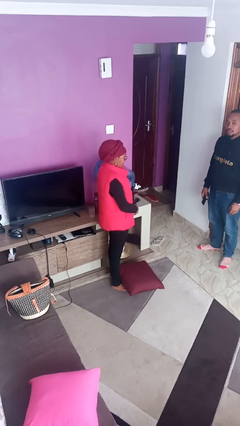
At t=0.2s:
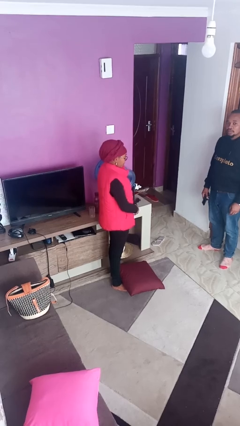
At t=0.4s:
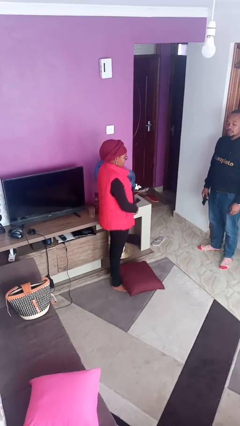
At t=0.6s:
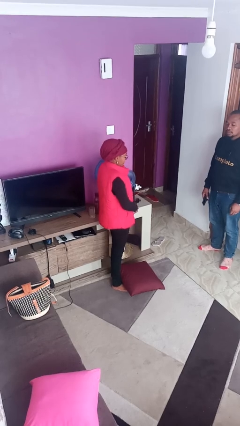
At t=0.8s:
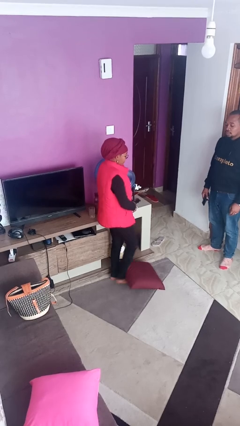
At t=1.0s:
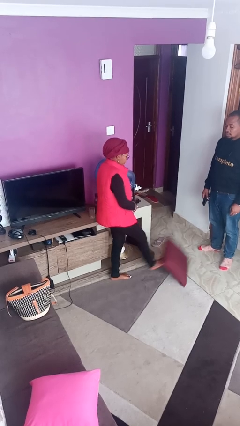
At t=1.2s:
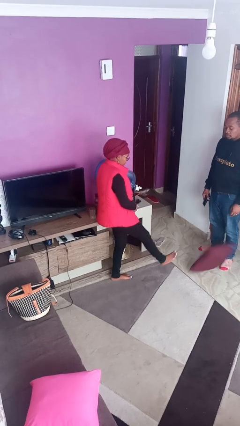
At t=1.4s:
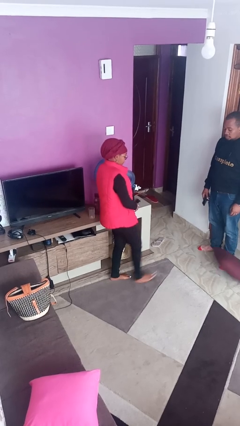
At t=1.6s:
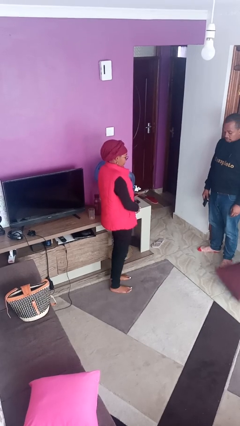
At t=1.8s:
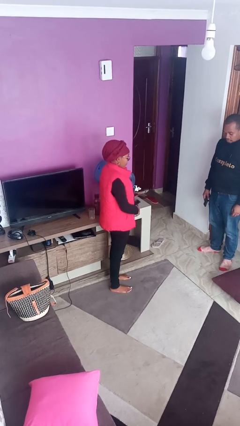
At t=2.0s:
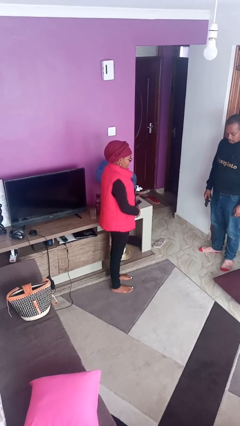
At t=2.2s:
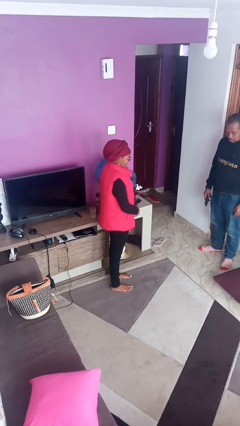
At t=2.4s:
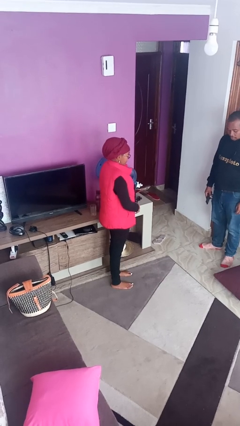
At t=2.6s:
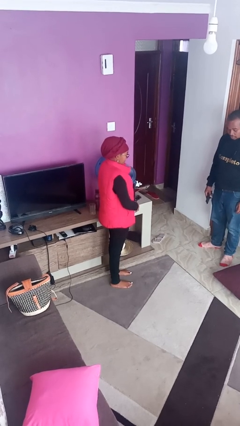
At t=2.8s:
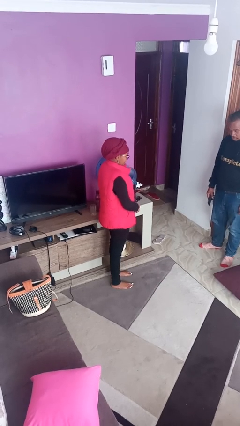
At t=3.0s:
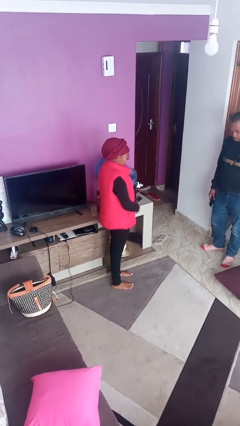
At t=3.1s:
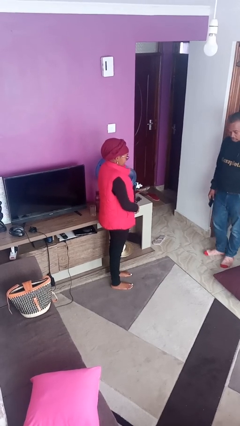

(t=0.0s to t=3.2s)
person kicks object to person

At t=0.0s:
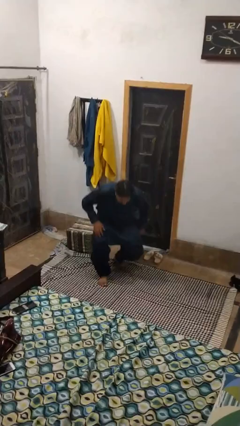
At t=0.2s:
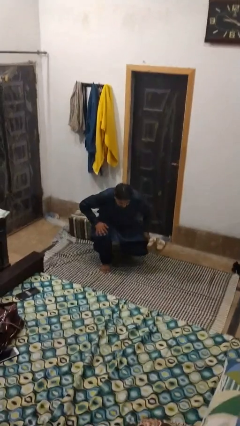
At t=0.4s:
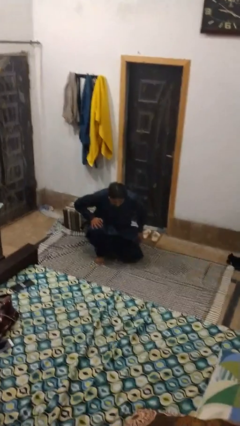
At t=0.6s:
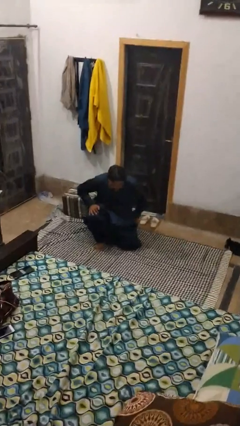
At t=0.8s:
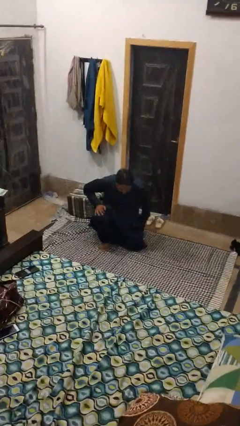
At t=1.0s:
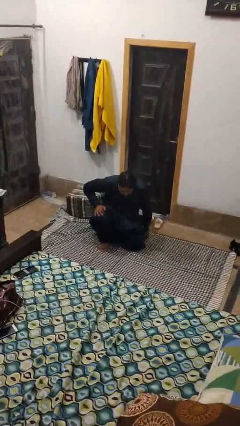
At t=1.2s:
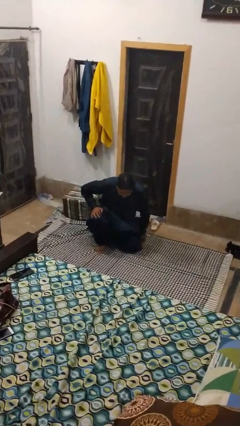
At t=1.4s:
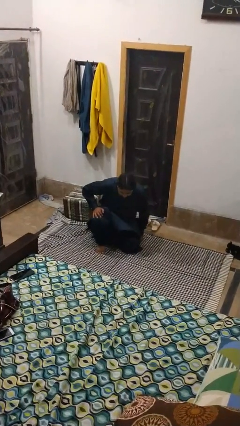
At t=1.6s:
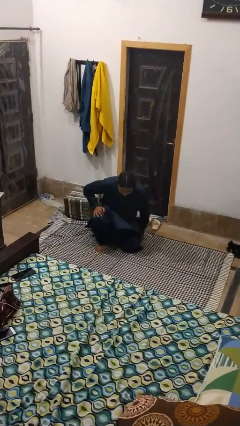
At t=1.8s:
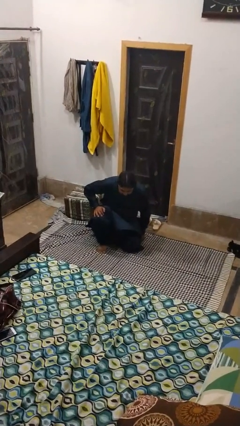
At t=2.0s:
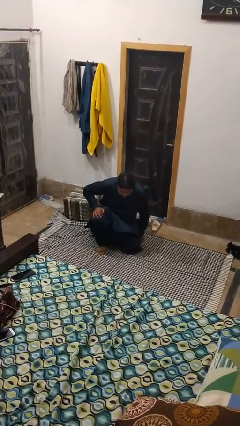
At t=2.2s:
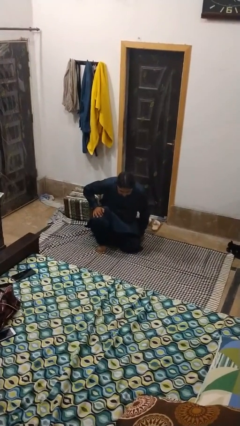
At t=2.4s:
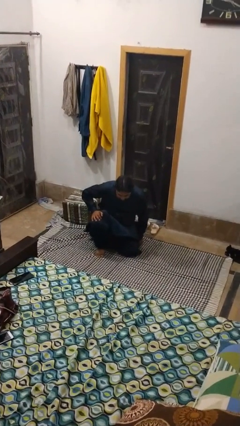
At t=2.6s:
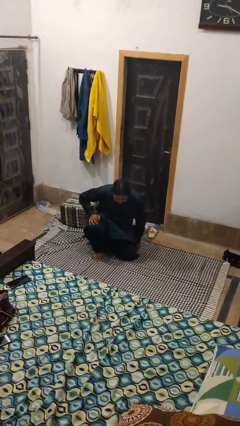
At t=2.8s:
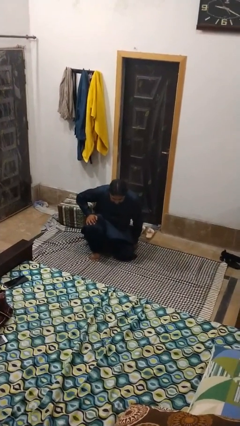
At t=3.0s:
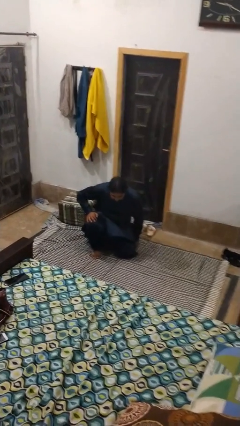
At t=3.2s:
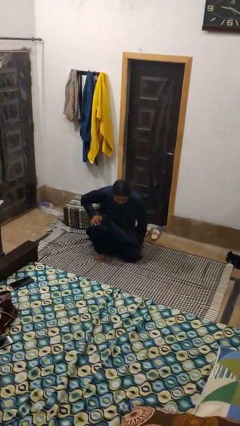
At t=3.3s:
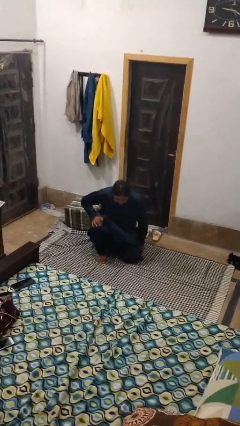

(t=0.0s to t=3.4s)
person kneels

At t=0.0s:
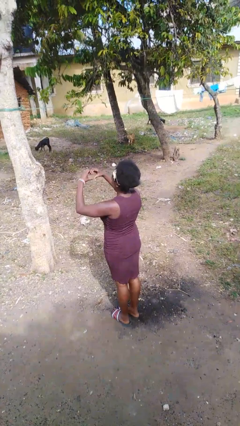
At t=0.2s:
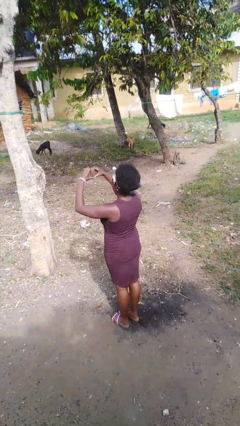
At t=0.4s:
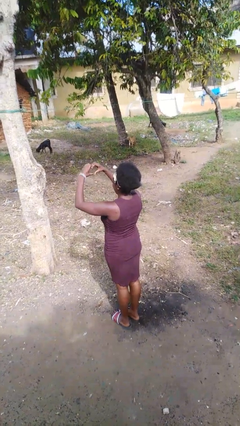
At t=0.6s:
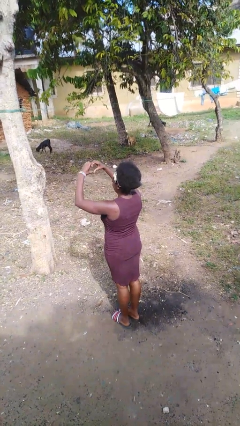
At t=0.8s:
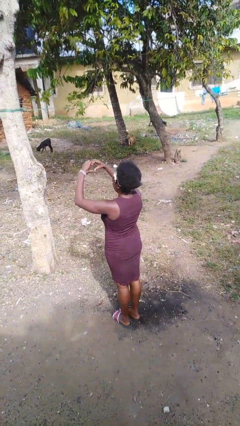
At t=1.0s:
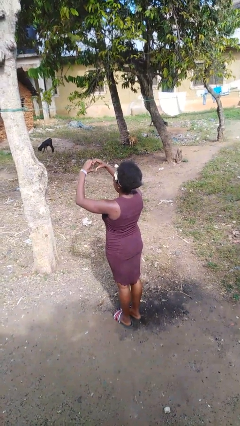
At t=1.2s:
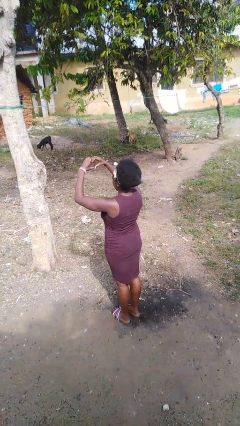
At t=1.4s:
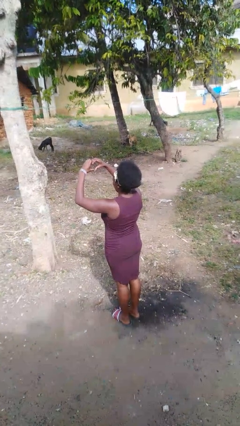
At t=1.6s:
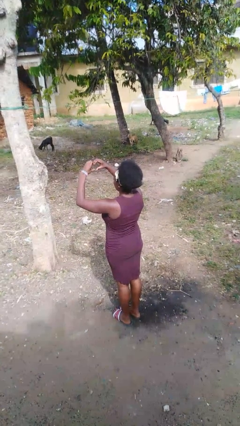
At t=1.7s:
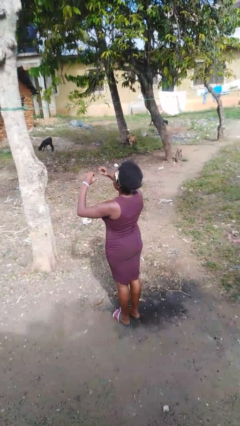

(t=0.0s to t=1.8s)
person gestures heart

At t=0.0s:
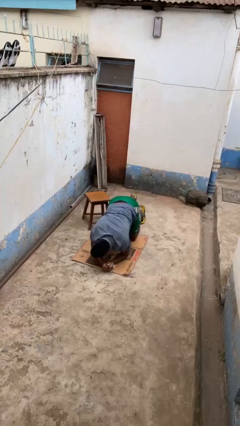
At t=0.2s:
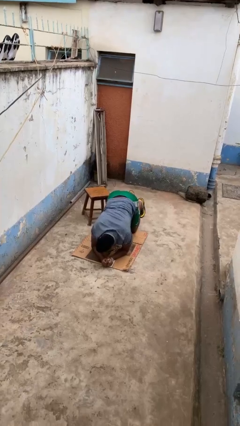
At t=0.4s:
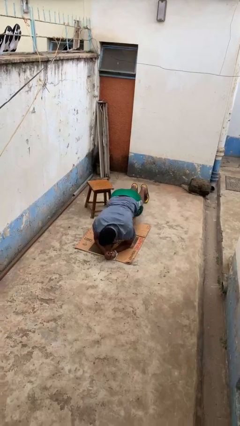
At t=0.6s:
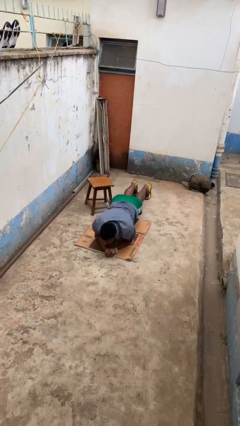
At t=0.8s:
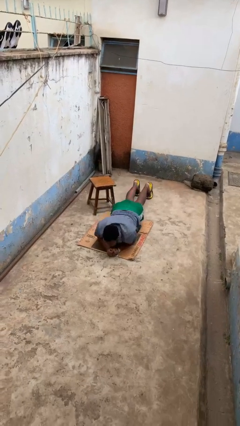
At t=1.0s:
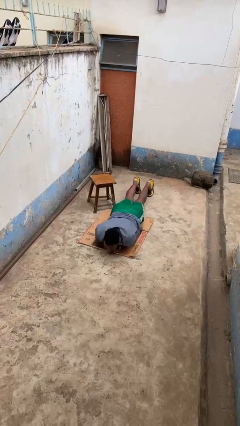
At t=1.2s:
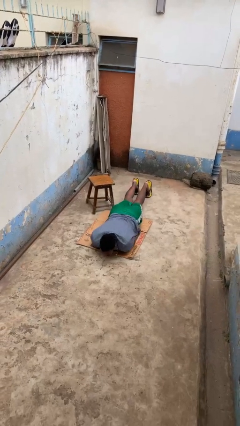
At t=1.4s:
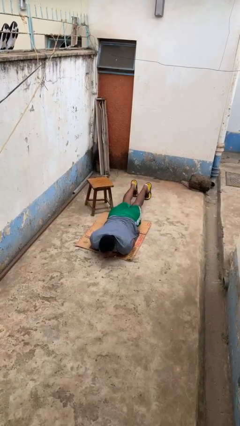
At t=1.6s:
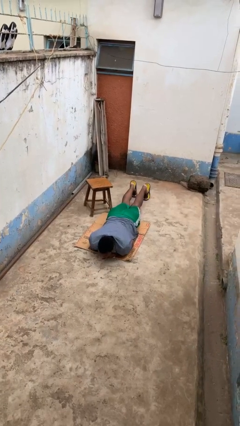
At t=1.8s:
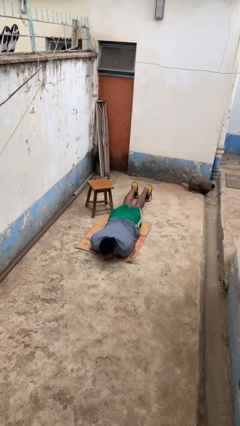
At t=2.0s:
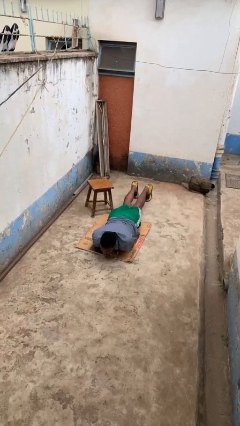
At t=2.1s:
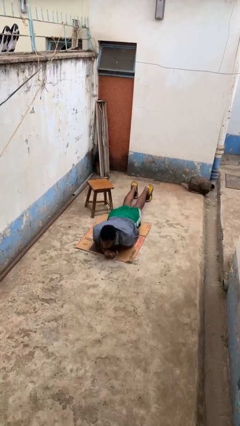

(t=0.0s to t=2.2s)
person lies down on floor

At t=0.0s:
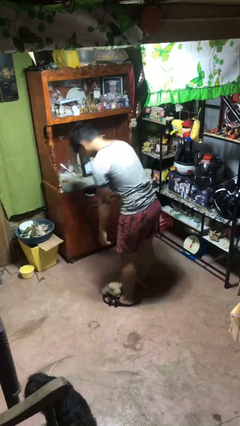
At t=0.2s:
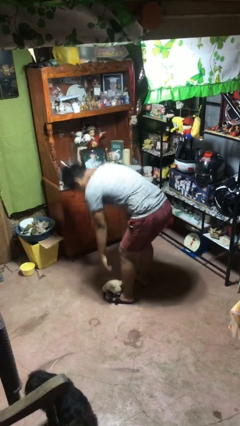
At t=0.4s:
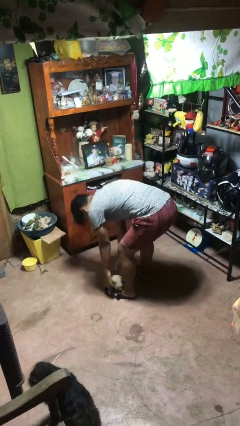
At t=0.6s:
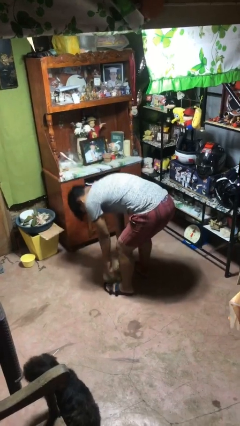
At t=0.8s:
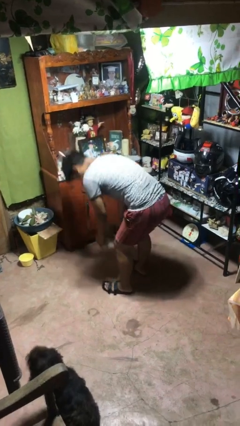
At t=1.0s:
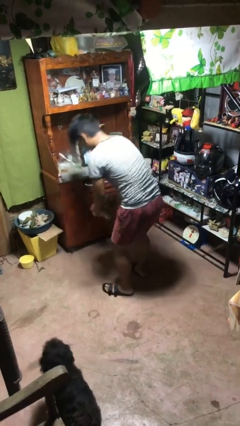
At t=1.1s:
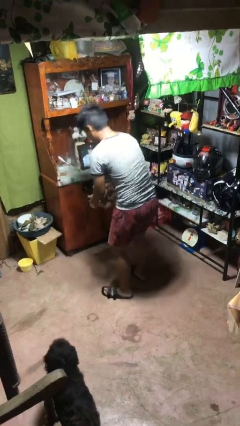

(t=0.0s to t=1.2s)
person picks up object from floor

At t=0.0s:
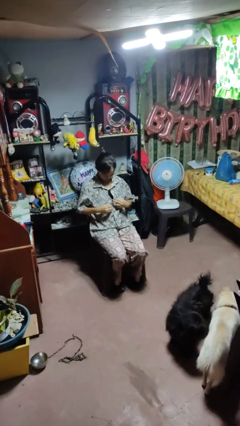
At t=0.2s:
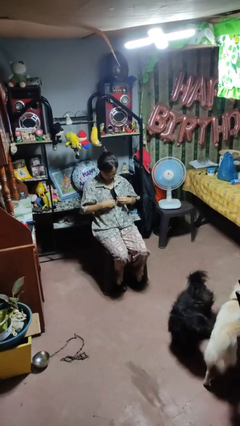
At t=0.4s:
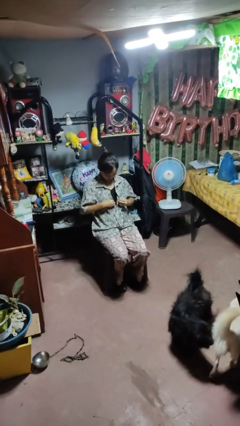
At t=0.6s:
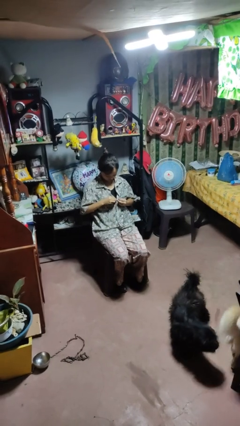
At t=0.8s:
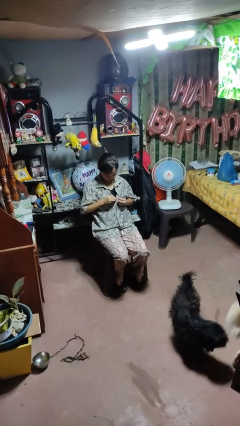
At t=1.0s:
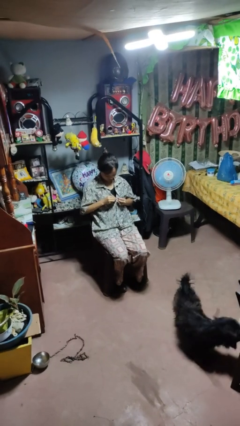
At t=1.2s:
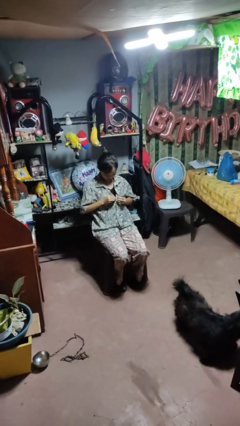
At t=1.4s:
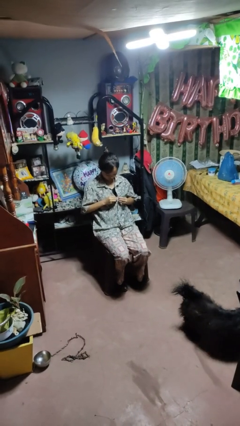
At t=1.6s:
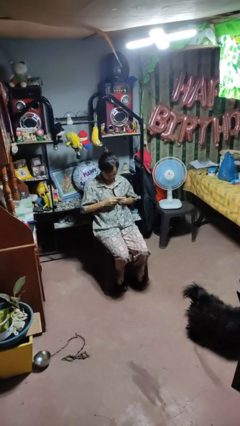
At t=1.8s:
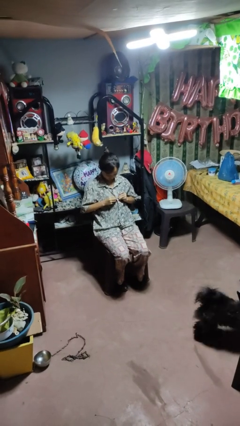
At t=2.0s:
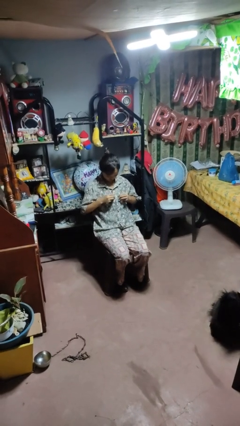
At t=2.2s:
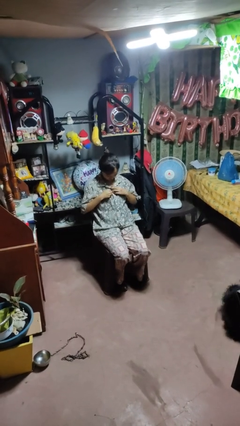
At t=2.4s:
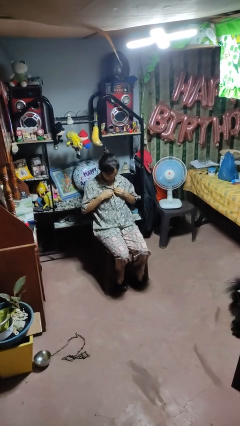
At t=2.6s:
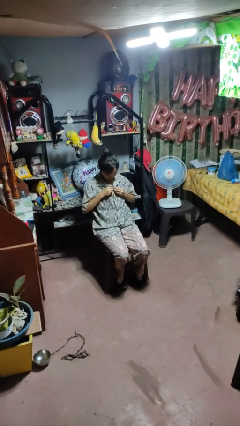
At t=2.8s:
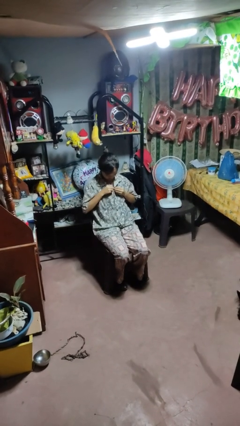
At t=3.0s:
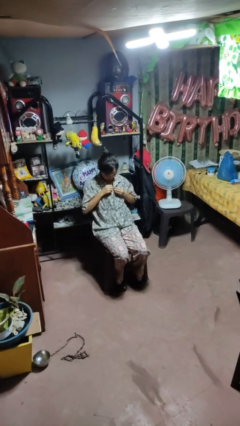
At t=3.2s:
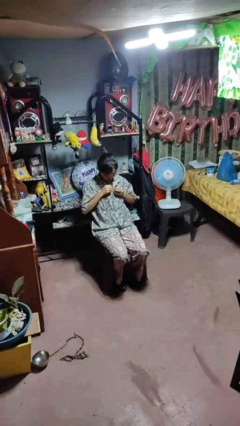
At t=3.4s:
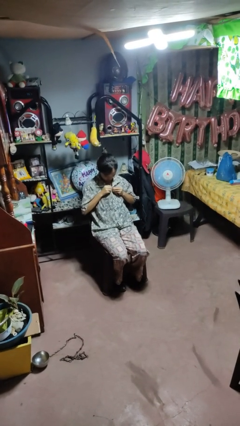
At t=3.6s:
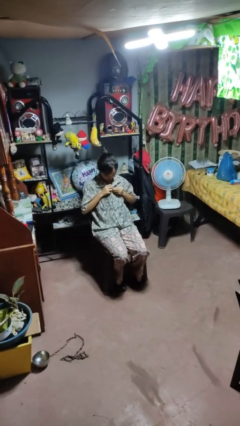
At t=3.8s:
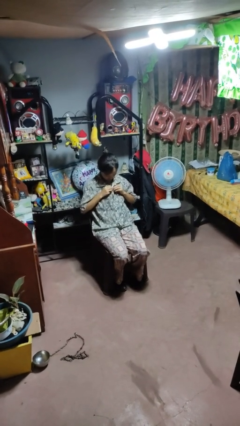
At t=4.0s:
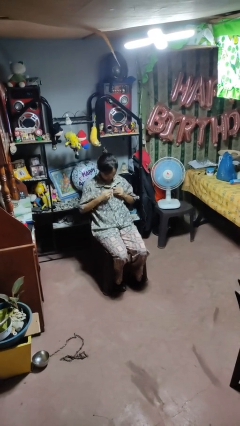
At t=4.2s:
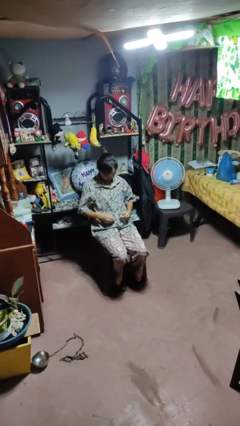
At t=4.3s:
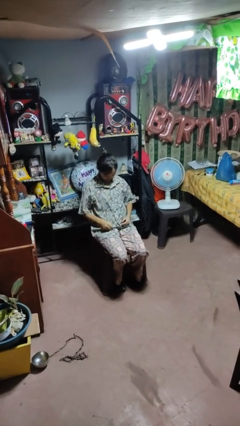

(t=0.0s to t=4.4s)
person buttons shirt

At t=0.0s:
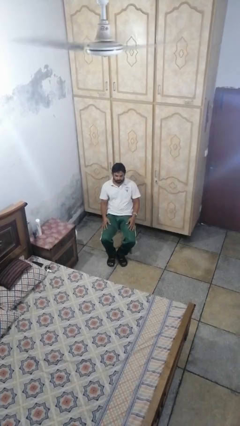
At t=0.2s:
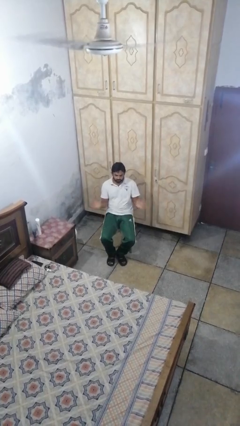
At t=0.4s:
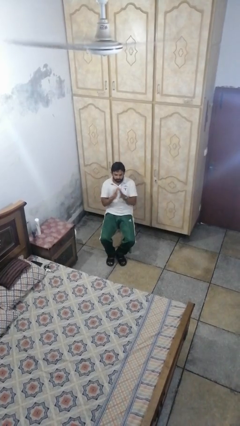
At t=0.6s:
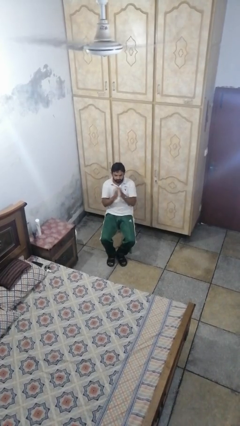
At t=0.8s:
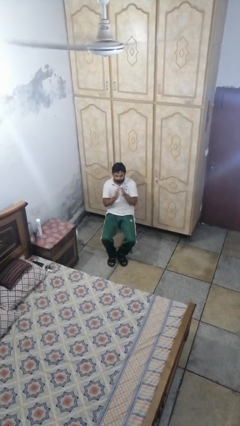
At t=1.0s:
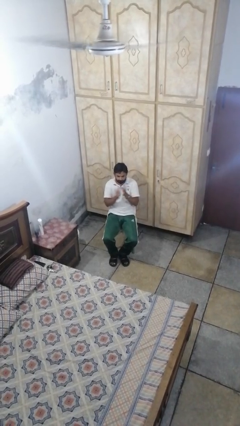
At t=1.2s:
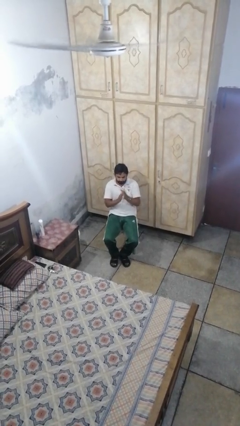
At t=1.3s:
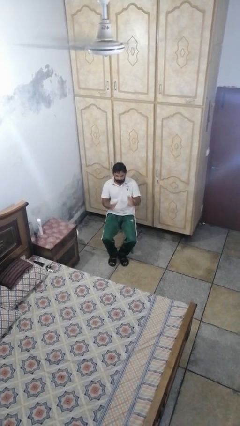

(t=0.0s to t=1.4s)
person claps hands
